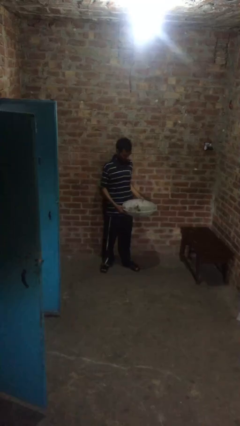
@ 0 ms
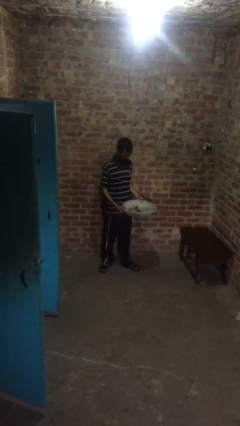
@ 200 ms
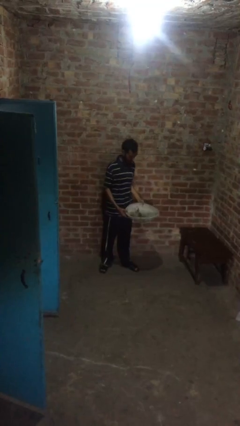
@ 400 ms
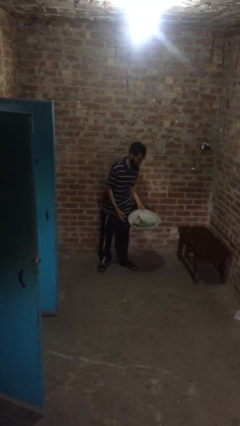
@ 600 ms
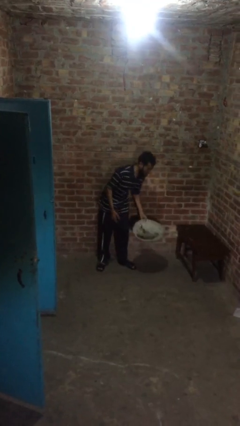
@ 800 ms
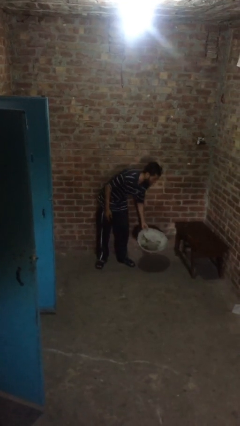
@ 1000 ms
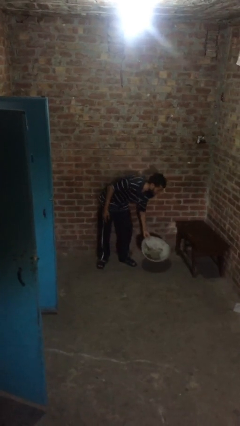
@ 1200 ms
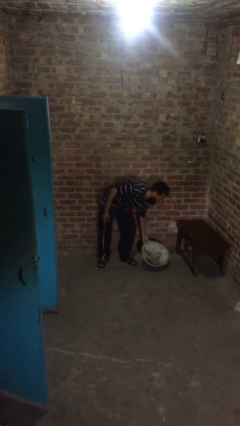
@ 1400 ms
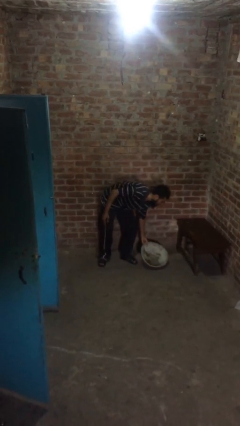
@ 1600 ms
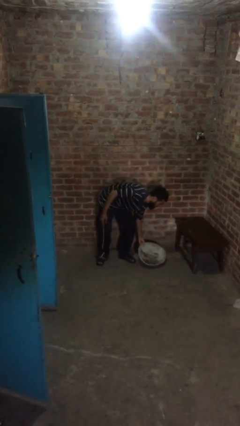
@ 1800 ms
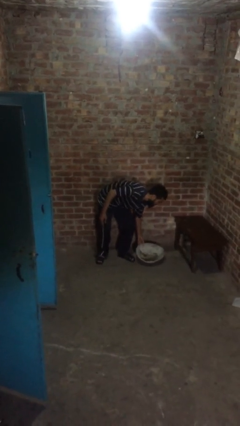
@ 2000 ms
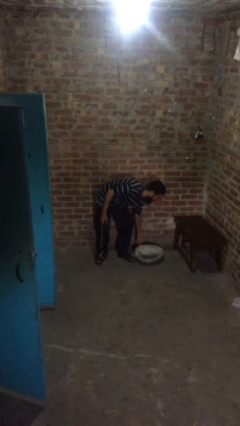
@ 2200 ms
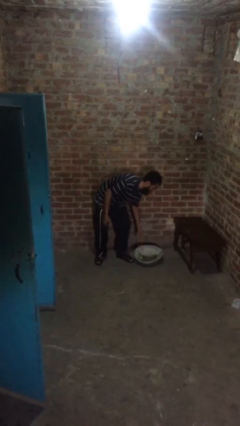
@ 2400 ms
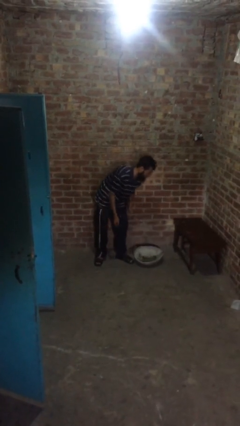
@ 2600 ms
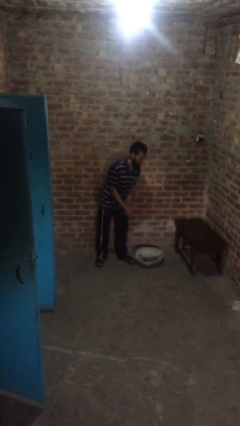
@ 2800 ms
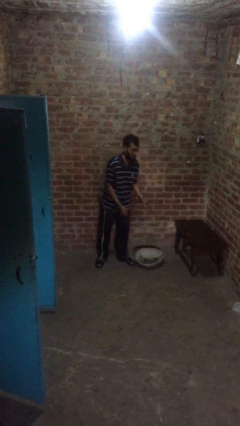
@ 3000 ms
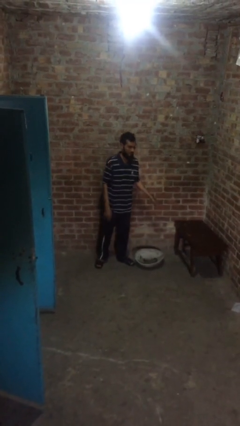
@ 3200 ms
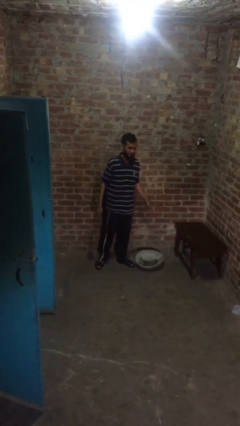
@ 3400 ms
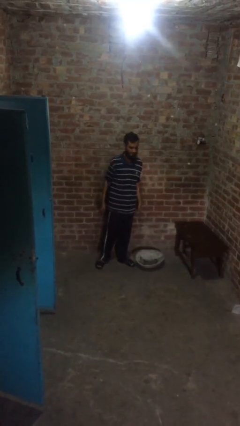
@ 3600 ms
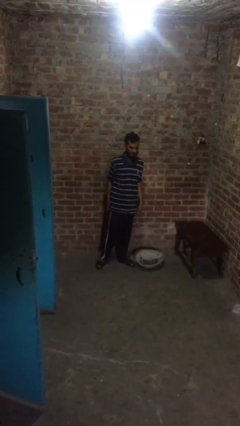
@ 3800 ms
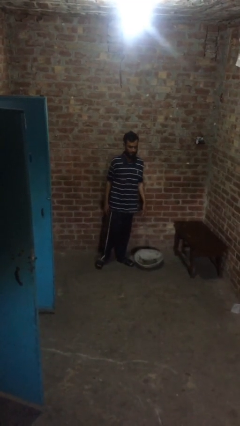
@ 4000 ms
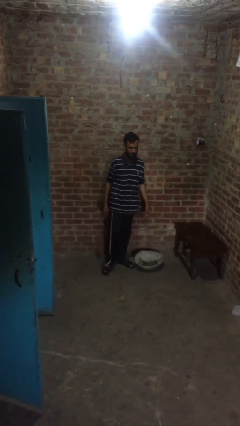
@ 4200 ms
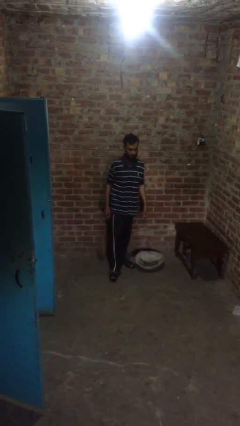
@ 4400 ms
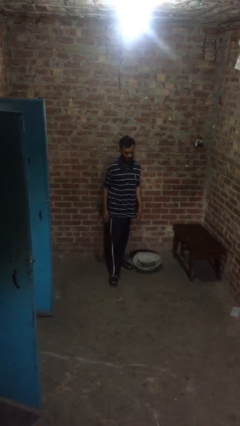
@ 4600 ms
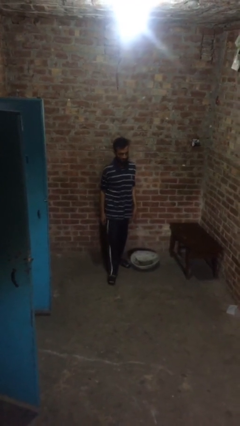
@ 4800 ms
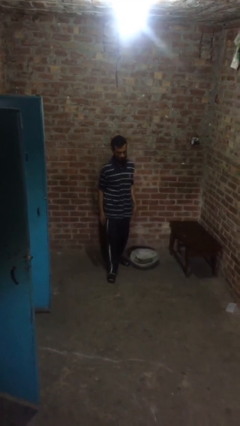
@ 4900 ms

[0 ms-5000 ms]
person puts down object on floor

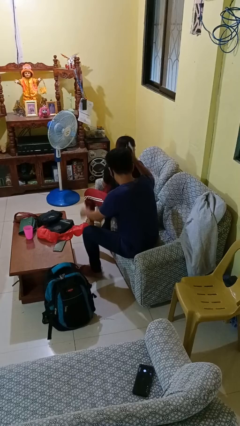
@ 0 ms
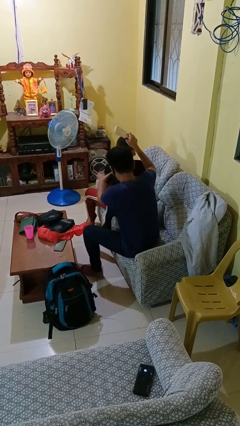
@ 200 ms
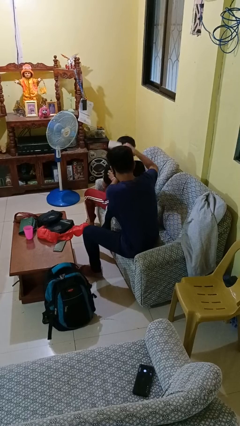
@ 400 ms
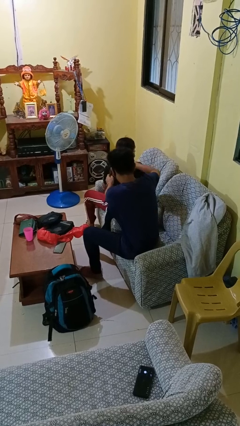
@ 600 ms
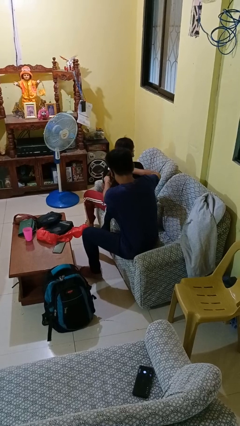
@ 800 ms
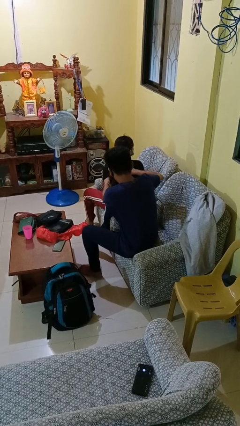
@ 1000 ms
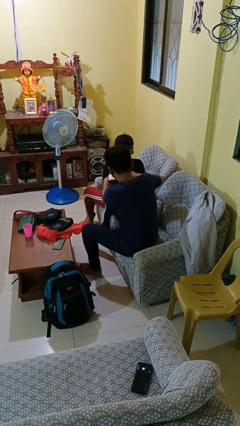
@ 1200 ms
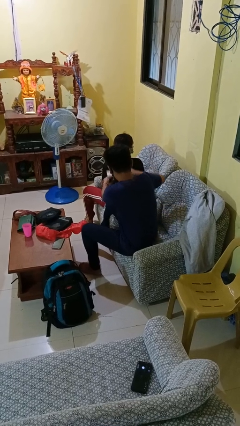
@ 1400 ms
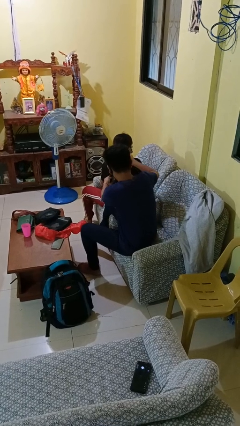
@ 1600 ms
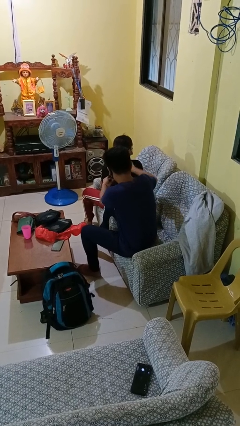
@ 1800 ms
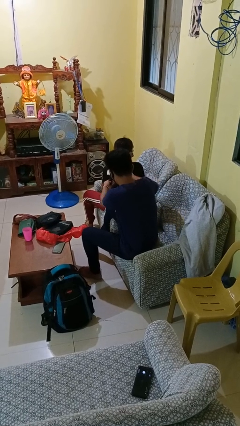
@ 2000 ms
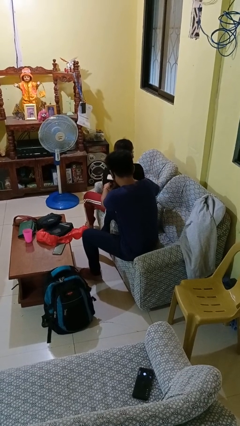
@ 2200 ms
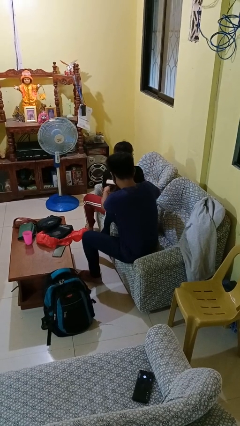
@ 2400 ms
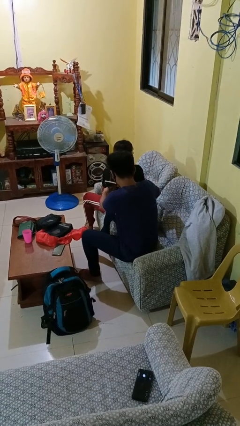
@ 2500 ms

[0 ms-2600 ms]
person brushes hair of person

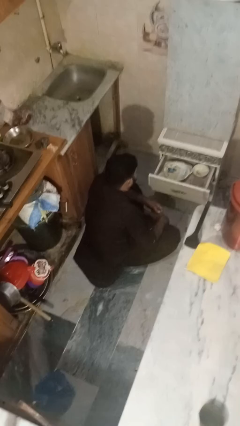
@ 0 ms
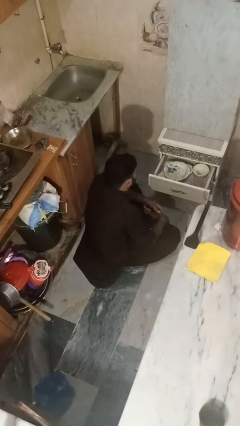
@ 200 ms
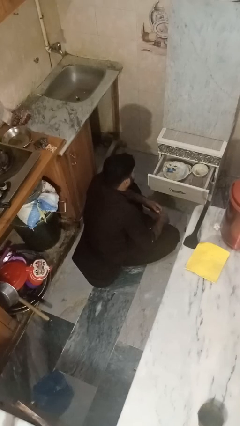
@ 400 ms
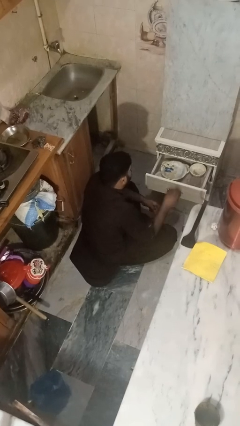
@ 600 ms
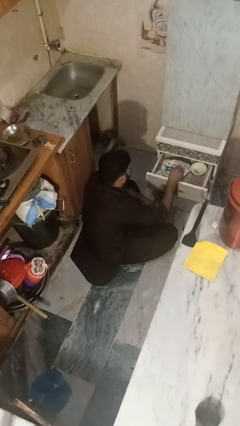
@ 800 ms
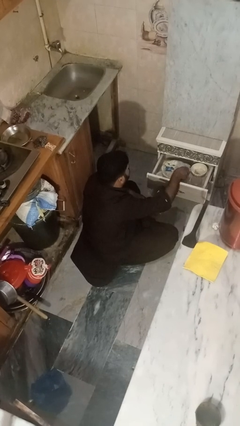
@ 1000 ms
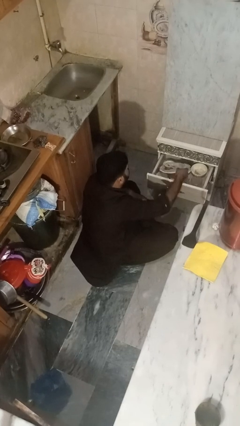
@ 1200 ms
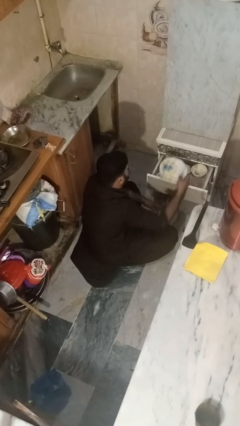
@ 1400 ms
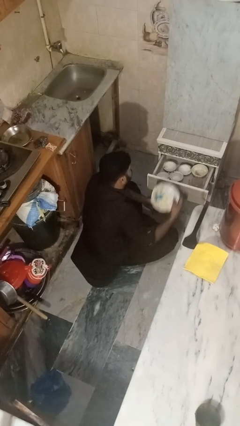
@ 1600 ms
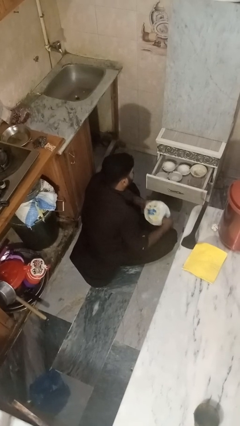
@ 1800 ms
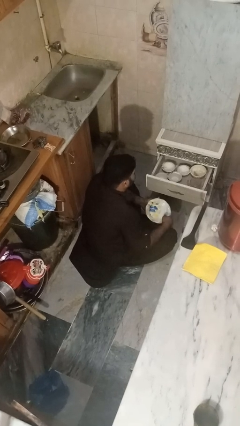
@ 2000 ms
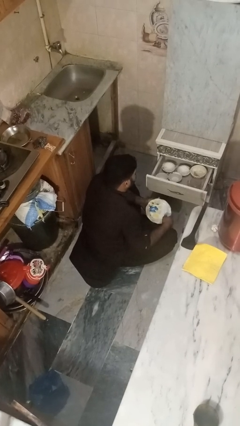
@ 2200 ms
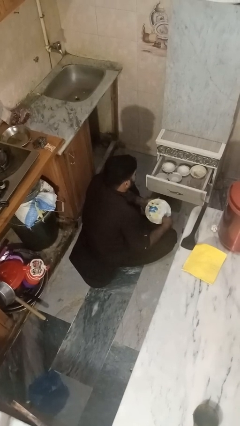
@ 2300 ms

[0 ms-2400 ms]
person takes object from kitchen drawer

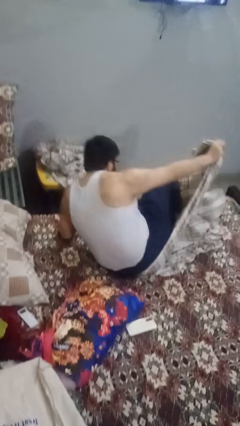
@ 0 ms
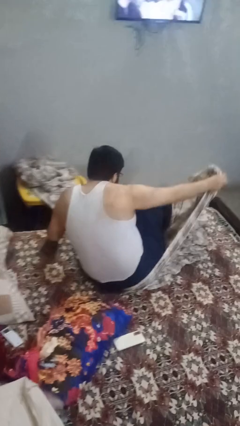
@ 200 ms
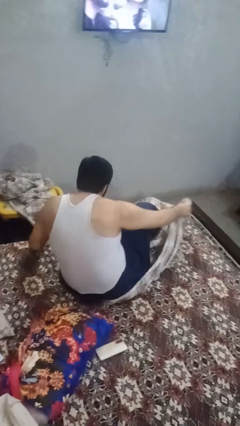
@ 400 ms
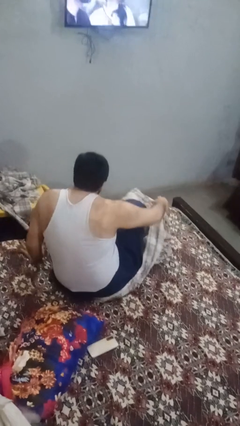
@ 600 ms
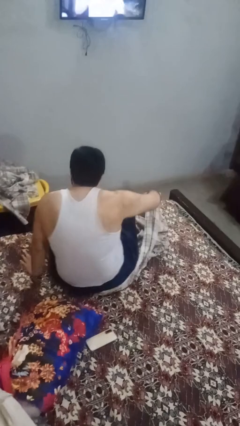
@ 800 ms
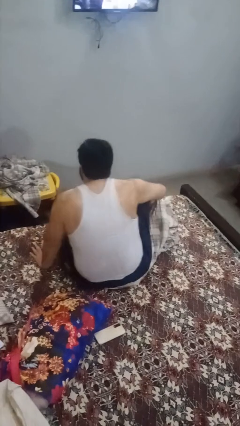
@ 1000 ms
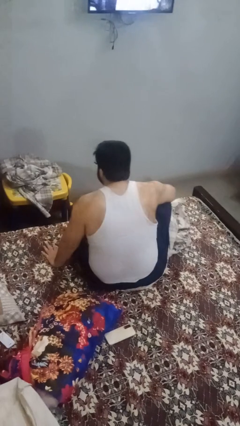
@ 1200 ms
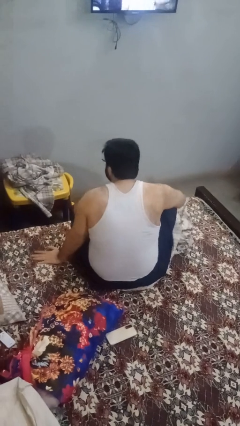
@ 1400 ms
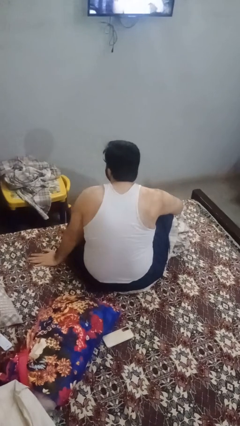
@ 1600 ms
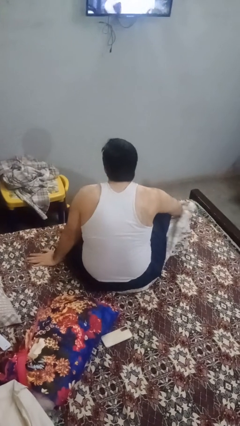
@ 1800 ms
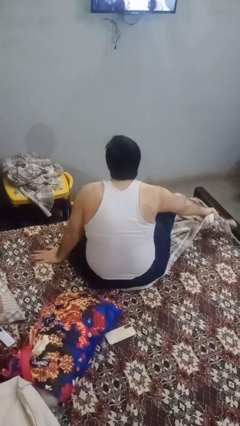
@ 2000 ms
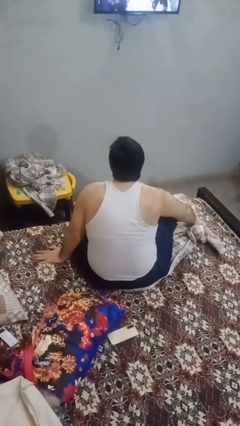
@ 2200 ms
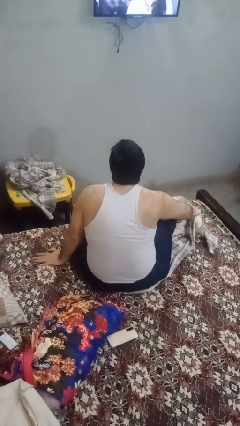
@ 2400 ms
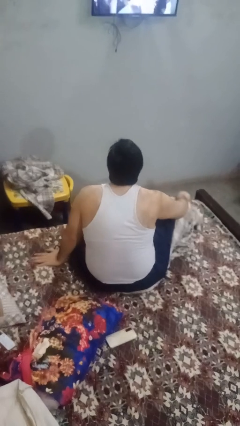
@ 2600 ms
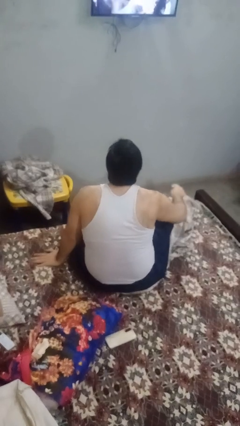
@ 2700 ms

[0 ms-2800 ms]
person uncovers with blanket

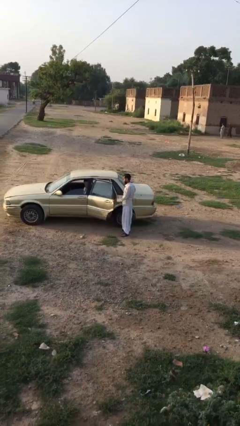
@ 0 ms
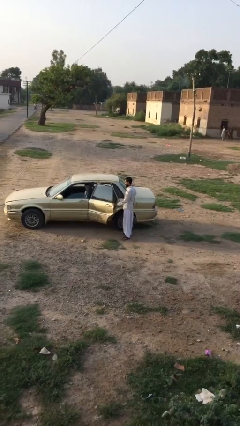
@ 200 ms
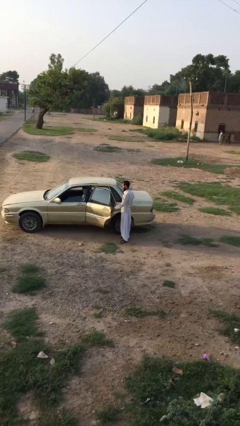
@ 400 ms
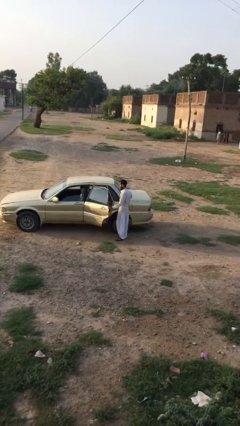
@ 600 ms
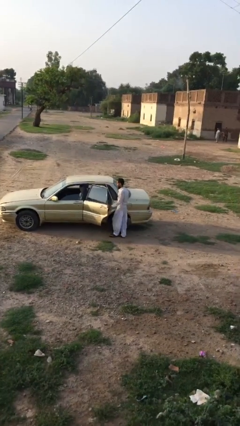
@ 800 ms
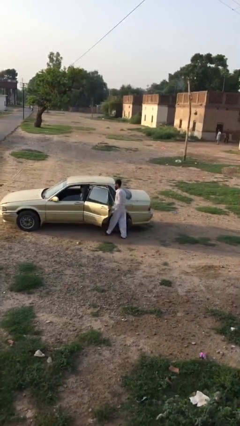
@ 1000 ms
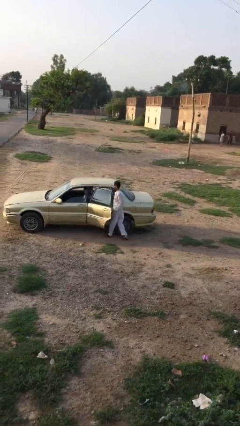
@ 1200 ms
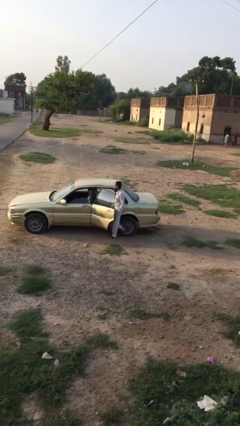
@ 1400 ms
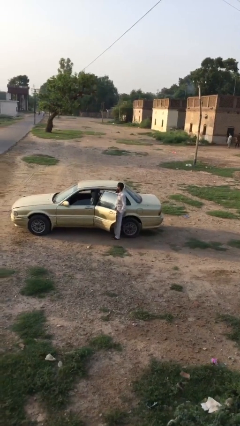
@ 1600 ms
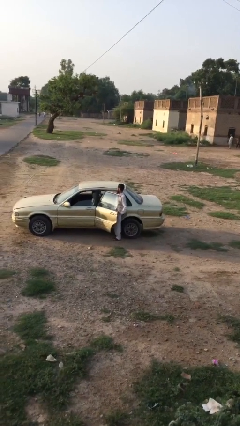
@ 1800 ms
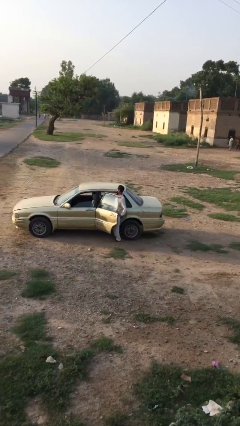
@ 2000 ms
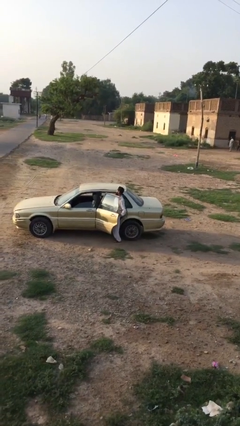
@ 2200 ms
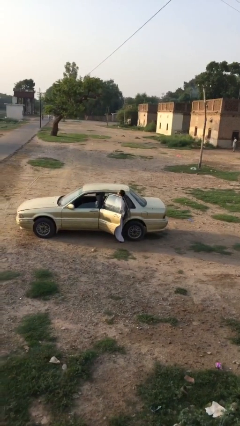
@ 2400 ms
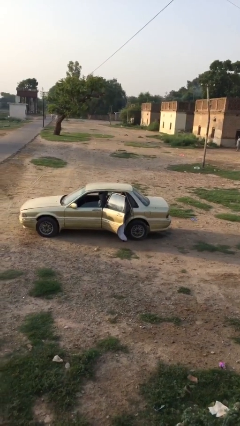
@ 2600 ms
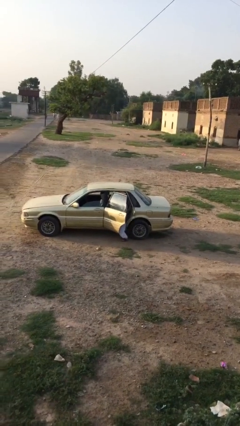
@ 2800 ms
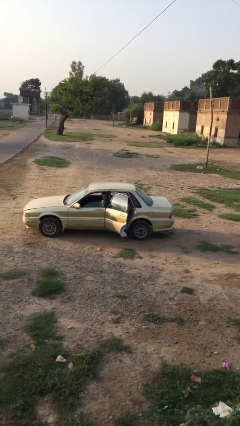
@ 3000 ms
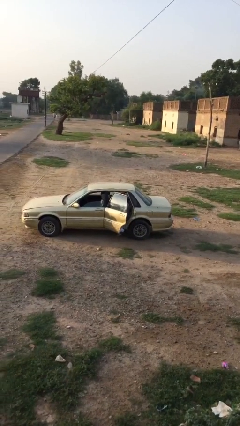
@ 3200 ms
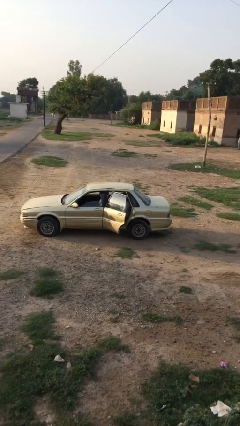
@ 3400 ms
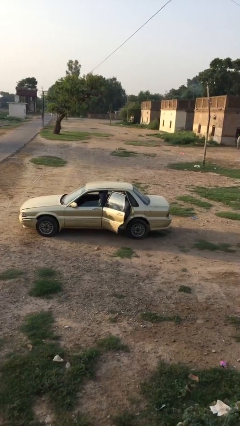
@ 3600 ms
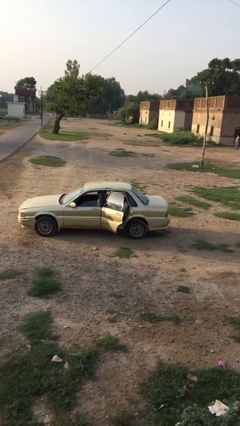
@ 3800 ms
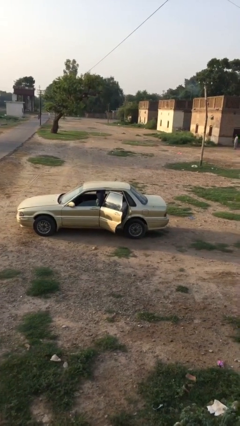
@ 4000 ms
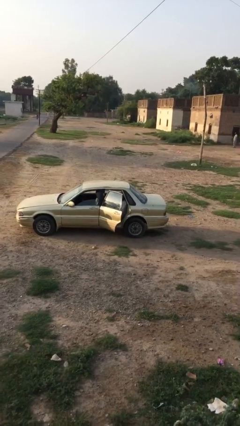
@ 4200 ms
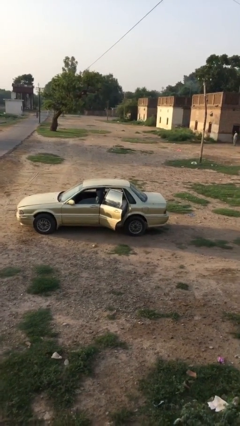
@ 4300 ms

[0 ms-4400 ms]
person enters car

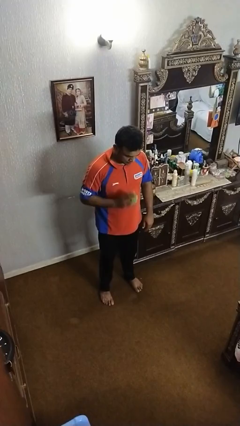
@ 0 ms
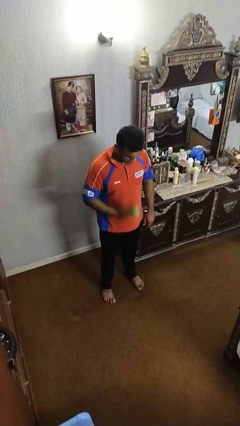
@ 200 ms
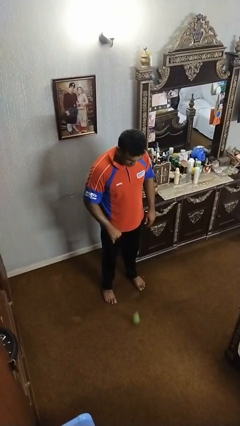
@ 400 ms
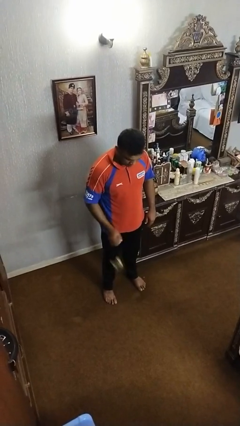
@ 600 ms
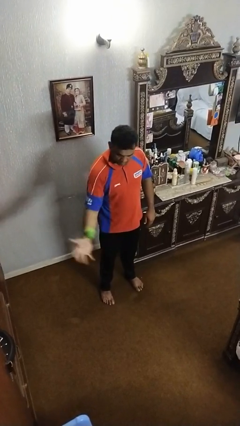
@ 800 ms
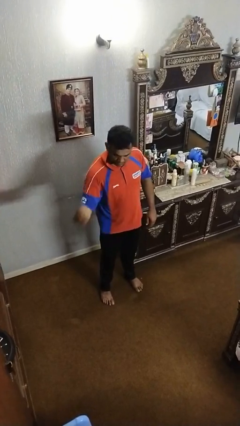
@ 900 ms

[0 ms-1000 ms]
person bounces ball on floor
